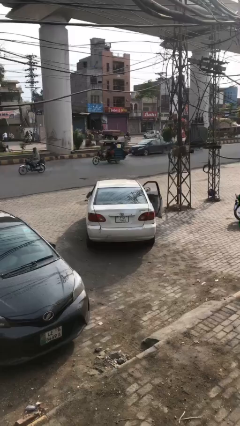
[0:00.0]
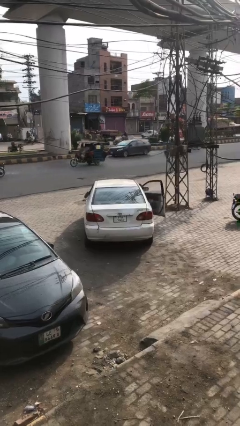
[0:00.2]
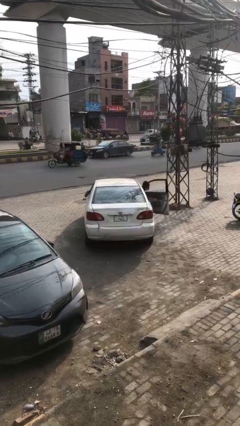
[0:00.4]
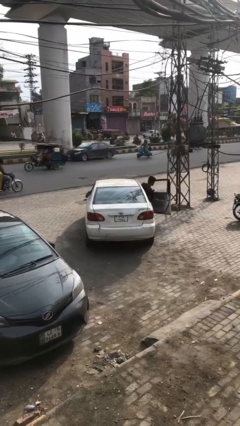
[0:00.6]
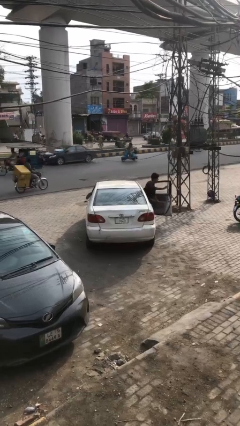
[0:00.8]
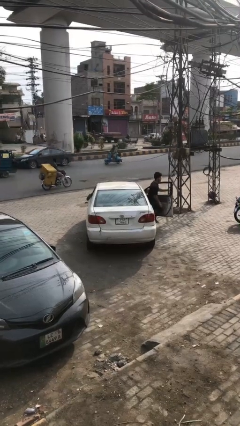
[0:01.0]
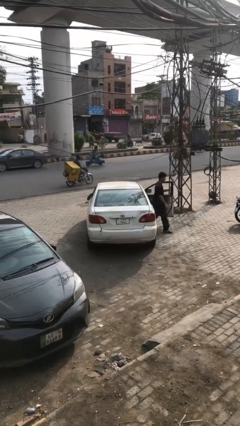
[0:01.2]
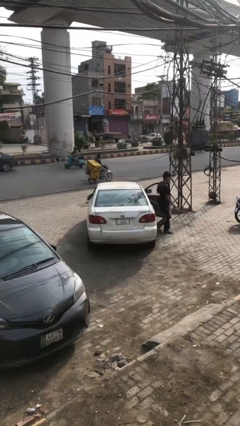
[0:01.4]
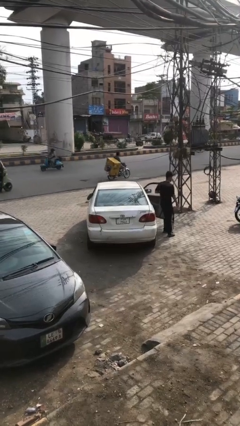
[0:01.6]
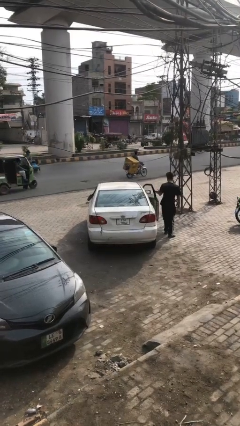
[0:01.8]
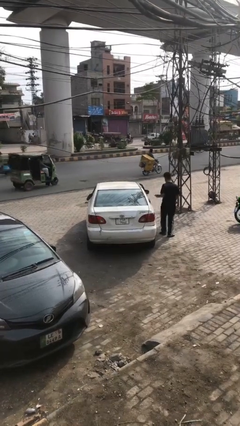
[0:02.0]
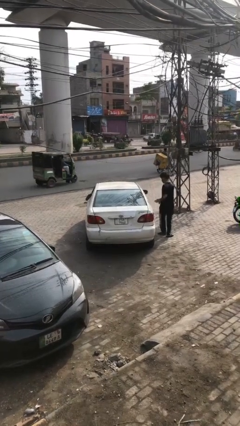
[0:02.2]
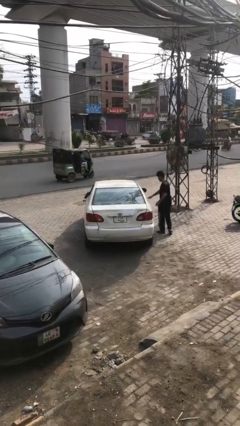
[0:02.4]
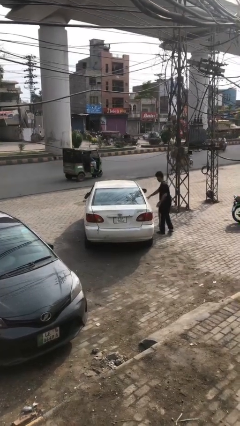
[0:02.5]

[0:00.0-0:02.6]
car drops off person

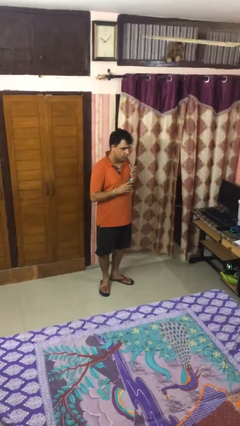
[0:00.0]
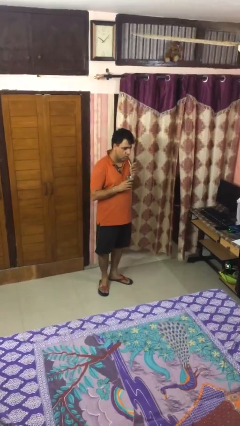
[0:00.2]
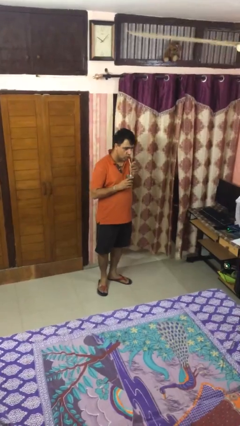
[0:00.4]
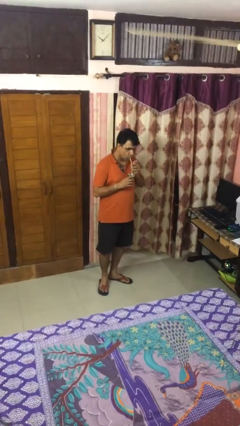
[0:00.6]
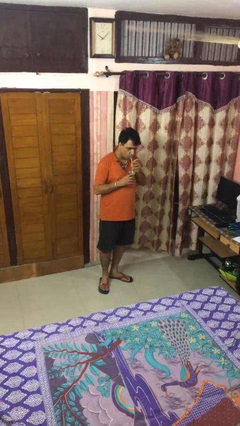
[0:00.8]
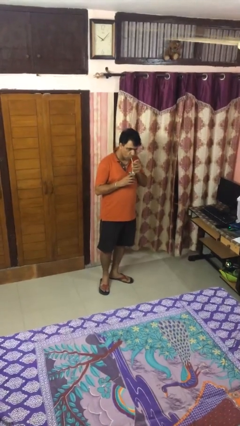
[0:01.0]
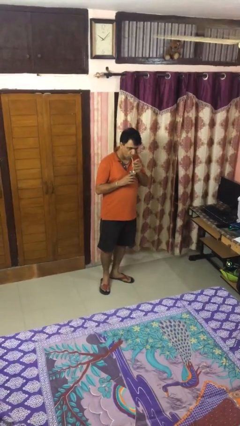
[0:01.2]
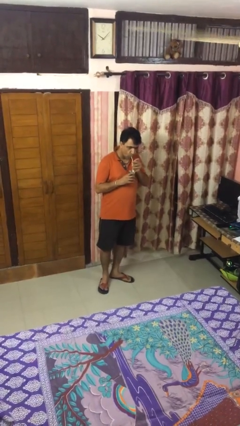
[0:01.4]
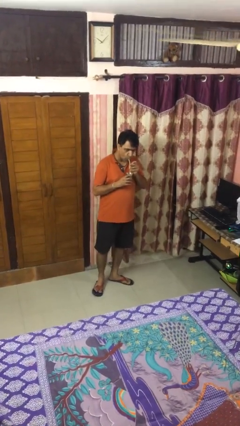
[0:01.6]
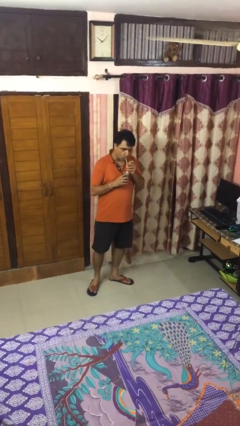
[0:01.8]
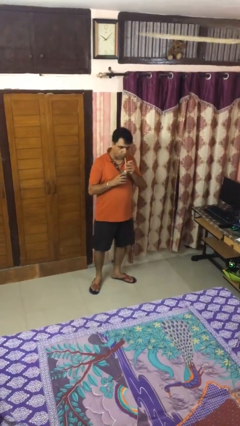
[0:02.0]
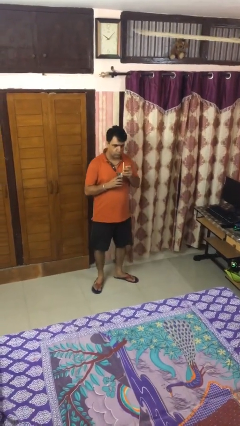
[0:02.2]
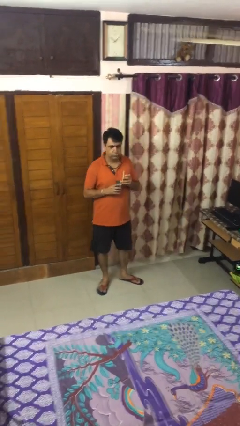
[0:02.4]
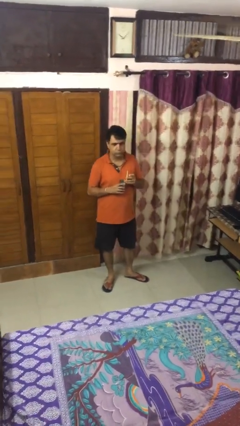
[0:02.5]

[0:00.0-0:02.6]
person drinks from straw

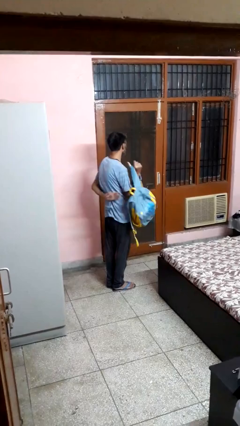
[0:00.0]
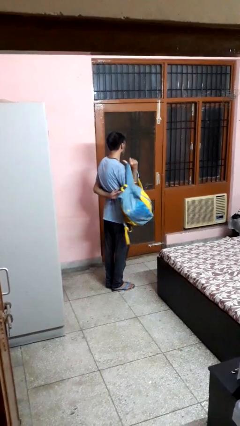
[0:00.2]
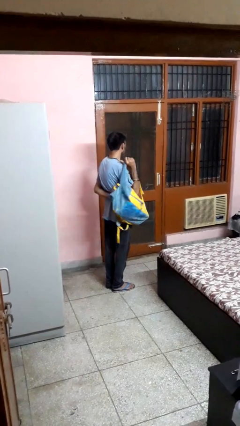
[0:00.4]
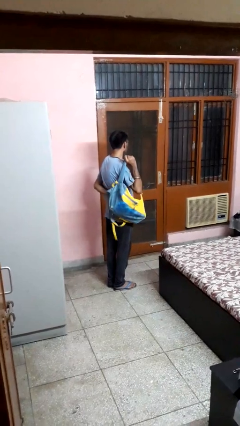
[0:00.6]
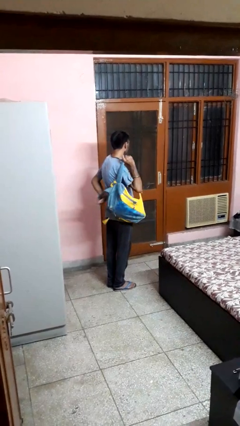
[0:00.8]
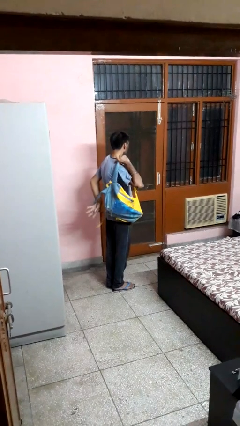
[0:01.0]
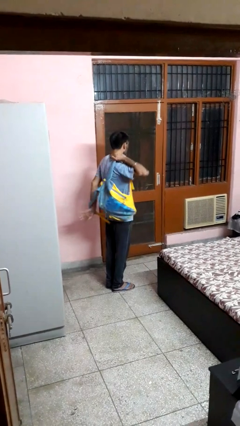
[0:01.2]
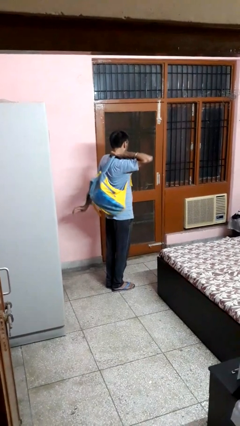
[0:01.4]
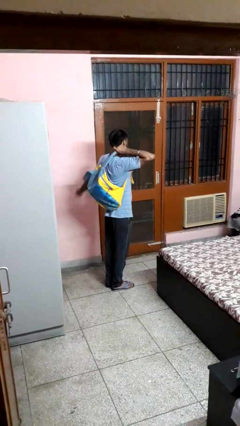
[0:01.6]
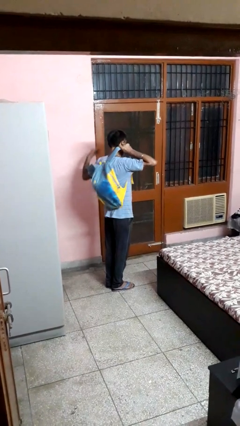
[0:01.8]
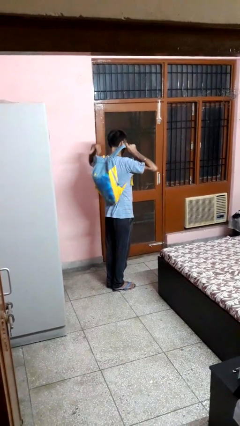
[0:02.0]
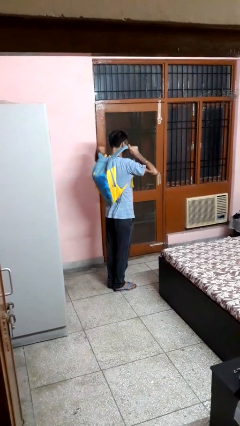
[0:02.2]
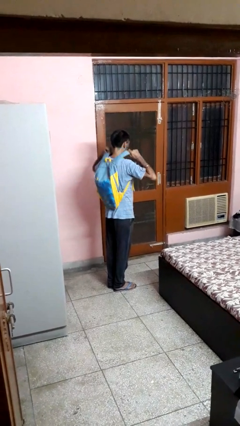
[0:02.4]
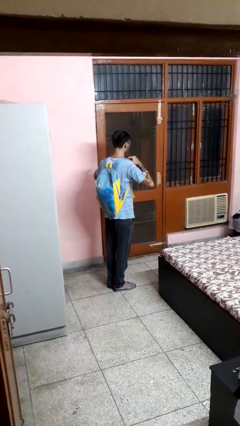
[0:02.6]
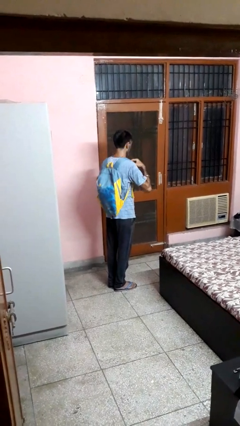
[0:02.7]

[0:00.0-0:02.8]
person puts on backpack

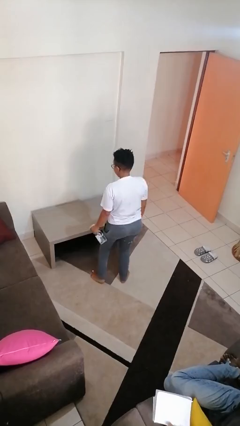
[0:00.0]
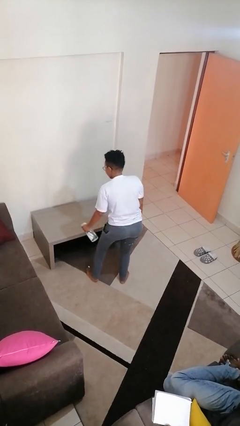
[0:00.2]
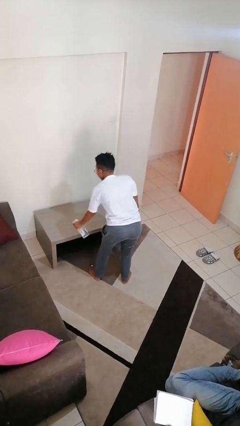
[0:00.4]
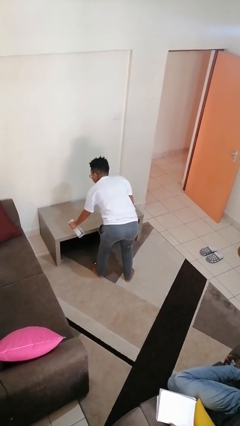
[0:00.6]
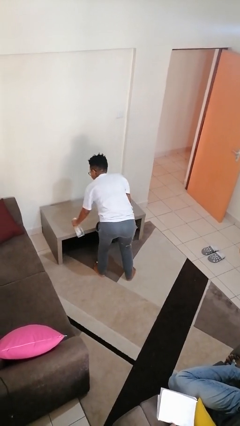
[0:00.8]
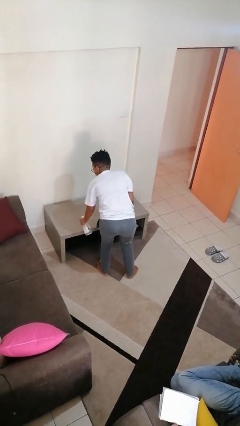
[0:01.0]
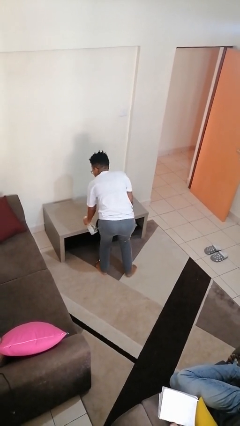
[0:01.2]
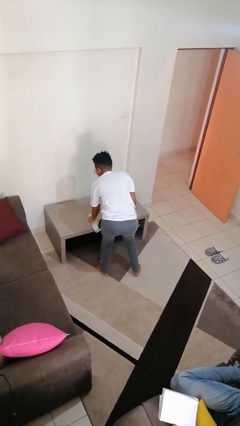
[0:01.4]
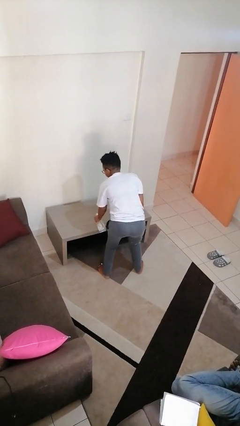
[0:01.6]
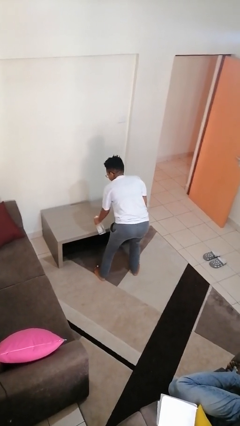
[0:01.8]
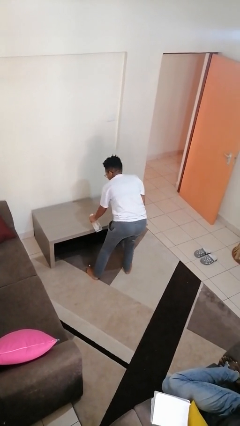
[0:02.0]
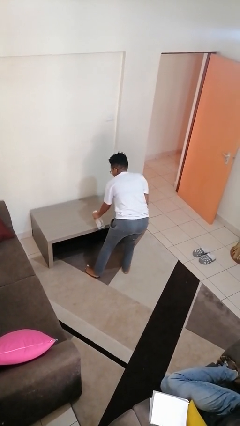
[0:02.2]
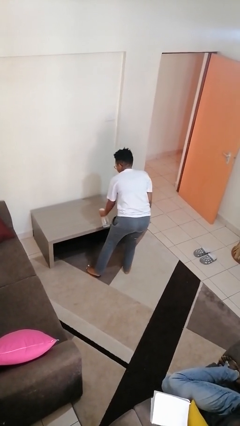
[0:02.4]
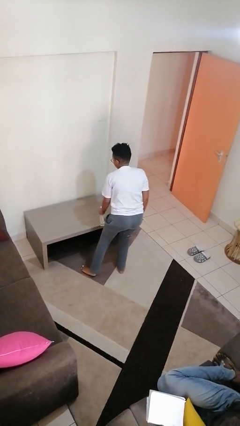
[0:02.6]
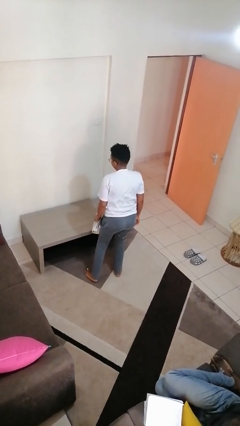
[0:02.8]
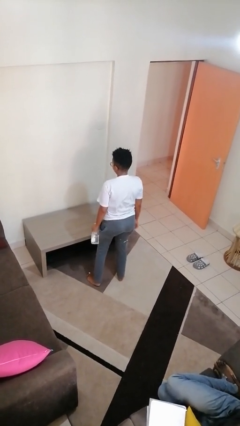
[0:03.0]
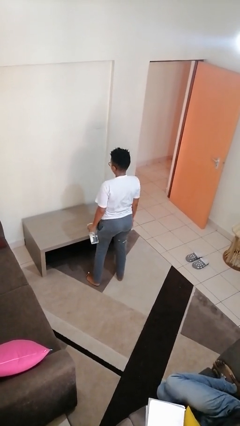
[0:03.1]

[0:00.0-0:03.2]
person sprays from bottle

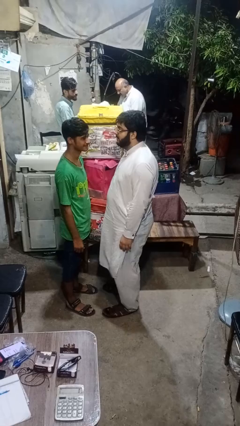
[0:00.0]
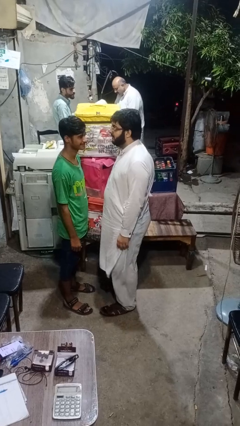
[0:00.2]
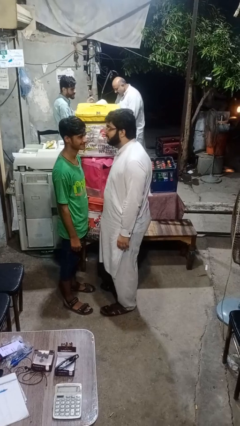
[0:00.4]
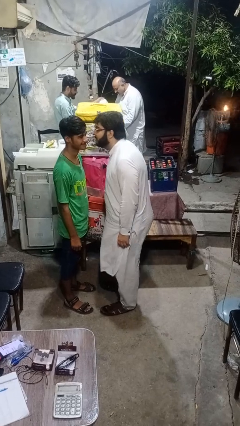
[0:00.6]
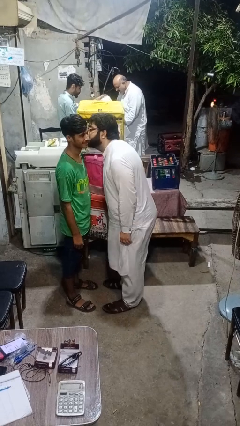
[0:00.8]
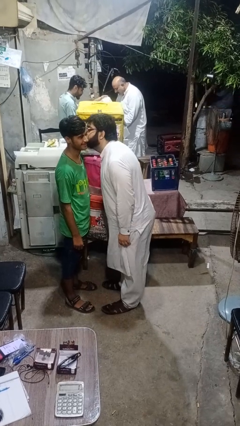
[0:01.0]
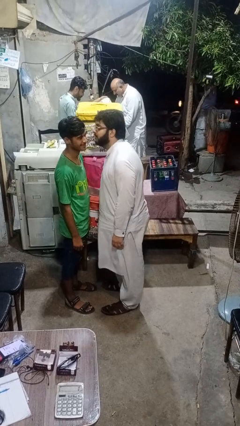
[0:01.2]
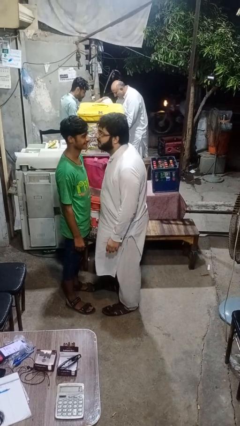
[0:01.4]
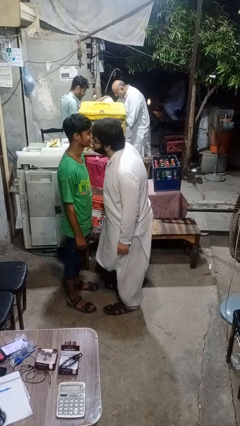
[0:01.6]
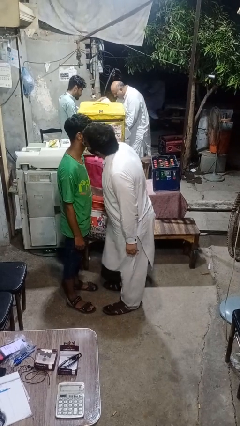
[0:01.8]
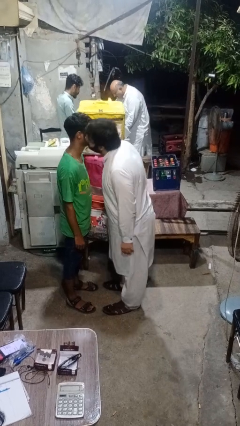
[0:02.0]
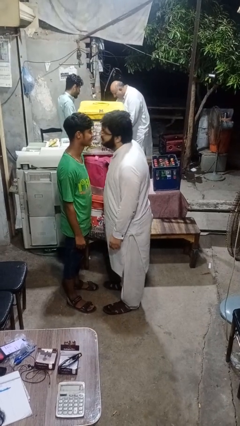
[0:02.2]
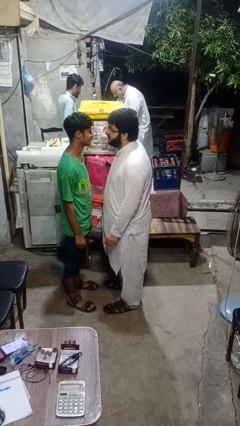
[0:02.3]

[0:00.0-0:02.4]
person kisses cheek of person

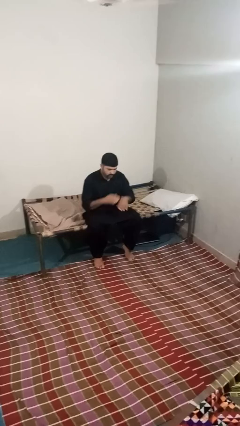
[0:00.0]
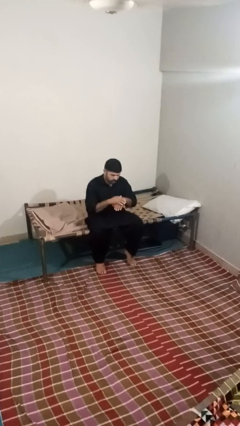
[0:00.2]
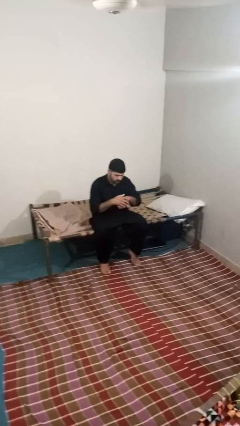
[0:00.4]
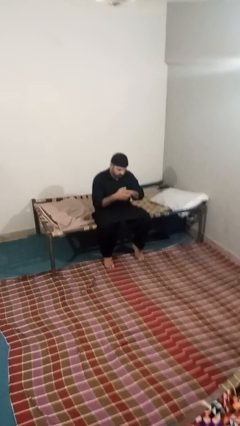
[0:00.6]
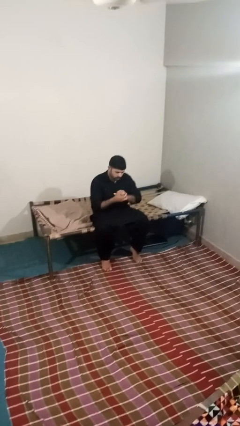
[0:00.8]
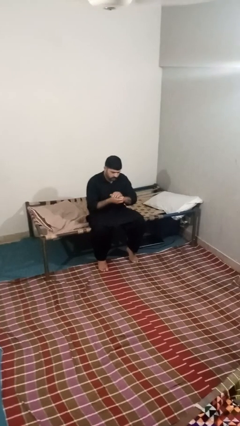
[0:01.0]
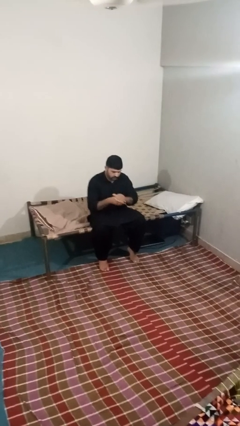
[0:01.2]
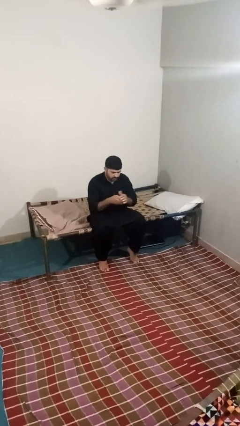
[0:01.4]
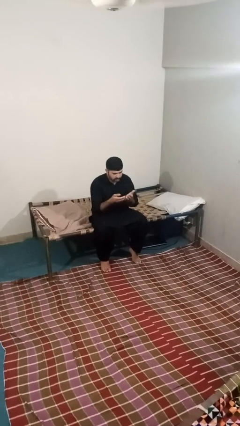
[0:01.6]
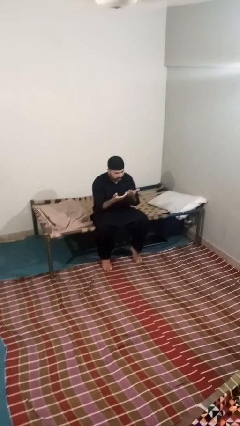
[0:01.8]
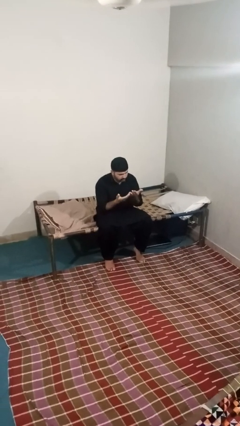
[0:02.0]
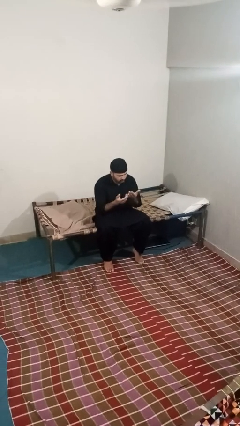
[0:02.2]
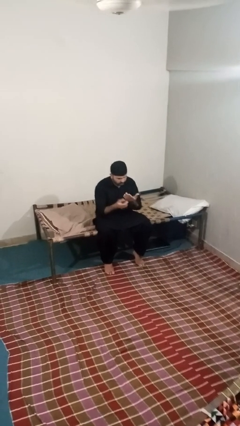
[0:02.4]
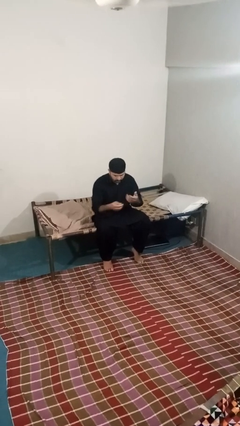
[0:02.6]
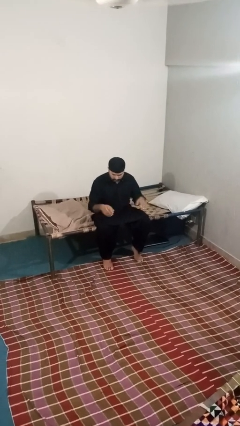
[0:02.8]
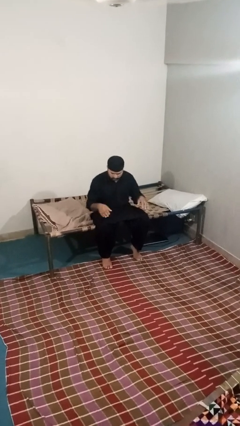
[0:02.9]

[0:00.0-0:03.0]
person looks at hands in lap

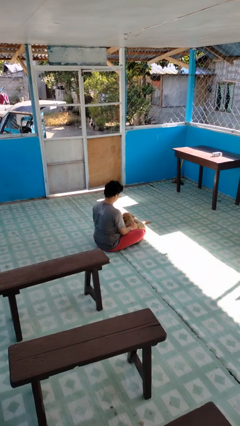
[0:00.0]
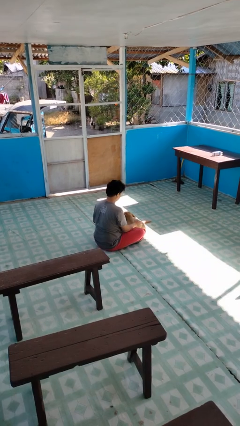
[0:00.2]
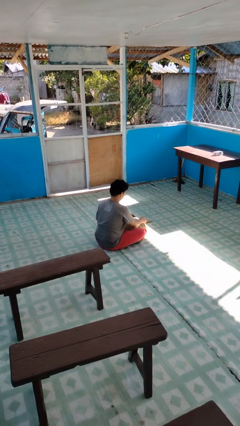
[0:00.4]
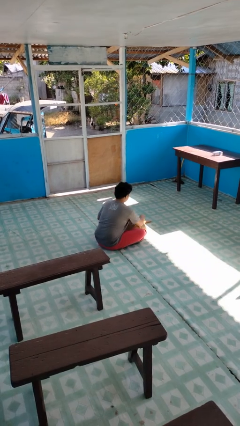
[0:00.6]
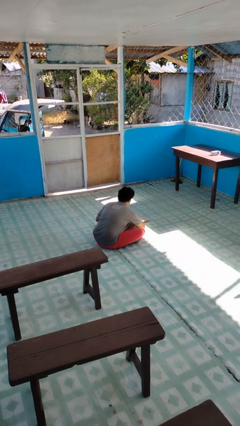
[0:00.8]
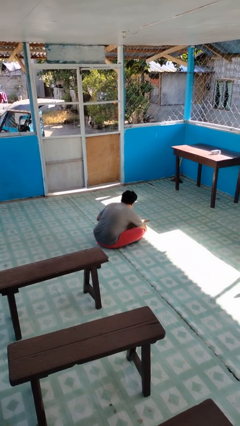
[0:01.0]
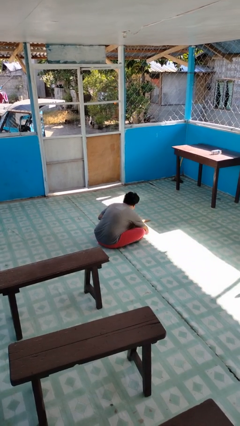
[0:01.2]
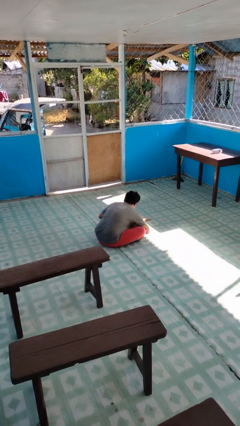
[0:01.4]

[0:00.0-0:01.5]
person hugs dog
